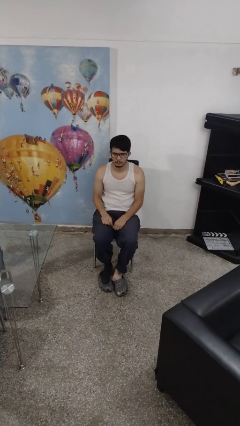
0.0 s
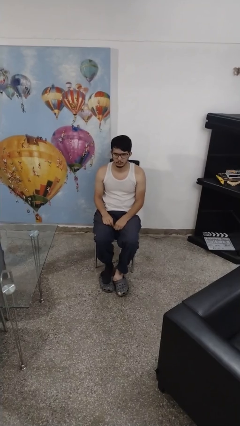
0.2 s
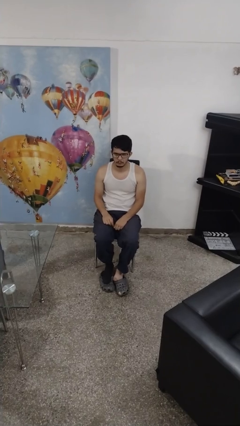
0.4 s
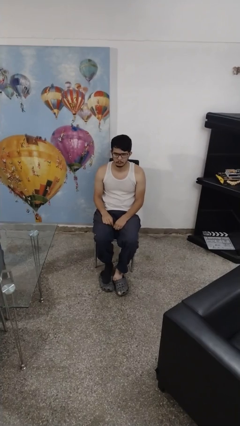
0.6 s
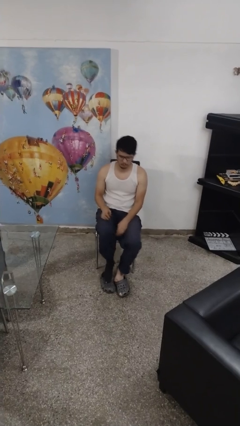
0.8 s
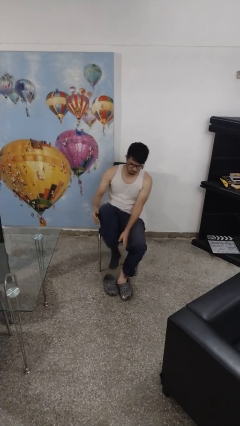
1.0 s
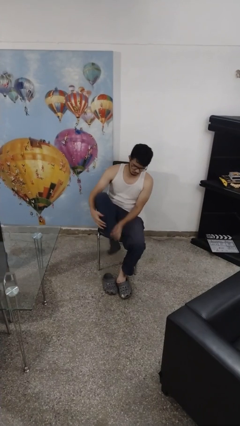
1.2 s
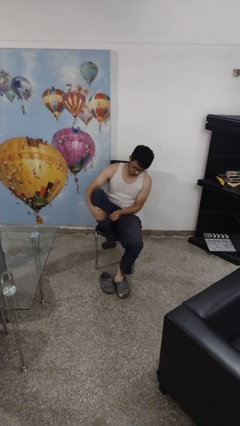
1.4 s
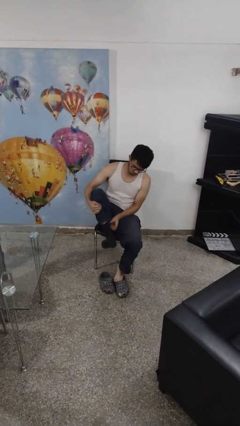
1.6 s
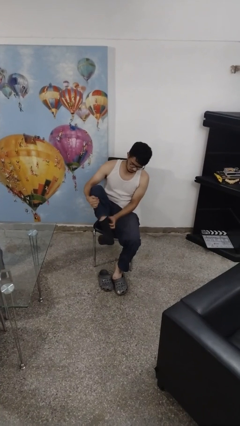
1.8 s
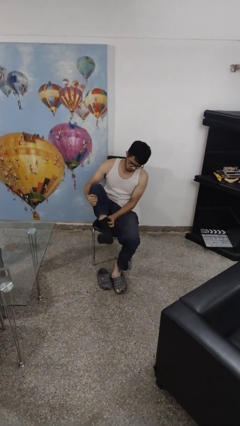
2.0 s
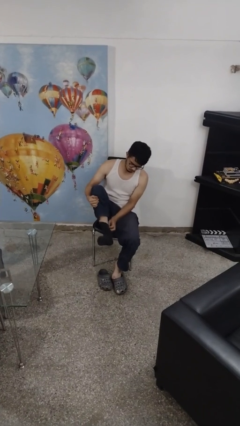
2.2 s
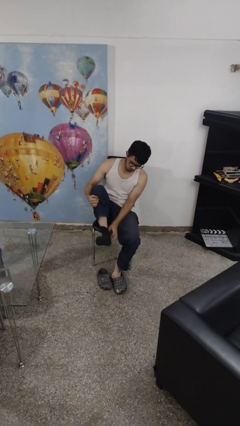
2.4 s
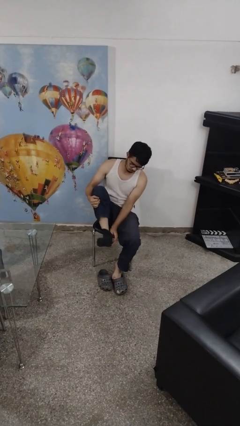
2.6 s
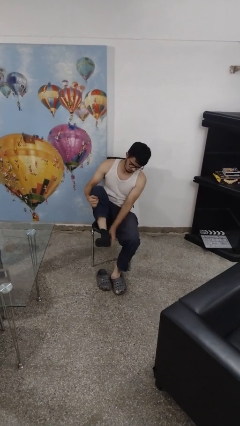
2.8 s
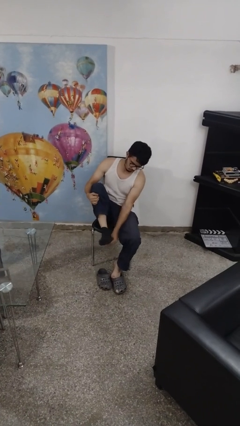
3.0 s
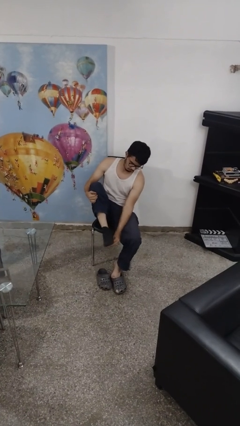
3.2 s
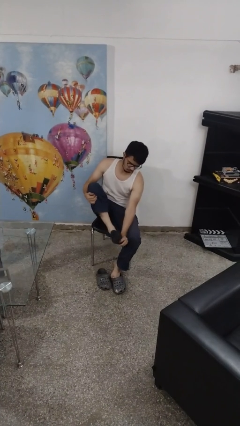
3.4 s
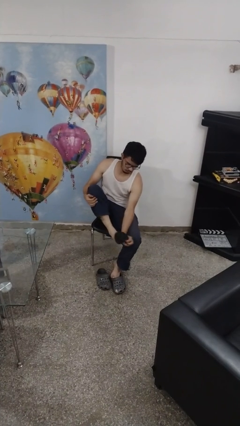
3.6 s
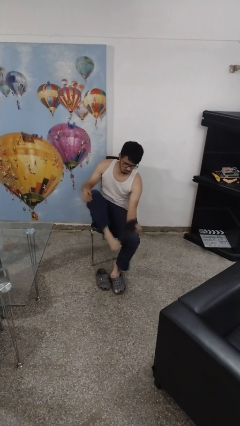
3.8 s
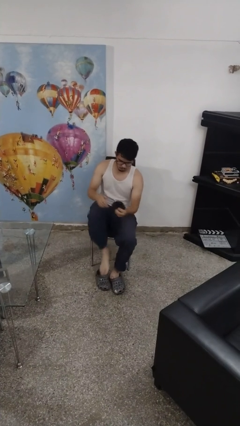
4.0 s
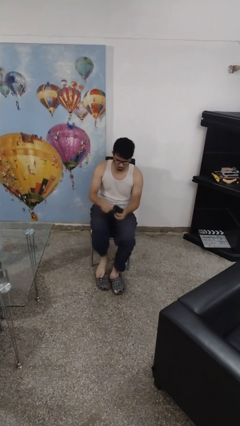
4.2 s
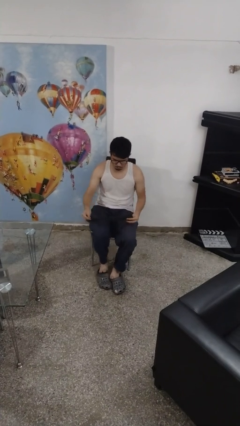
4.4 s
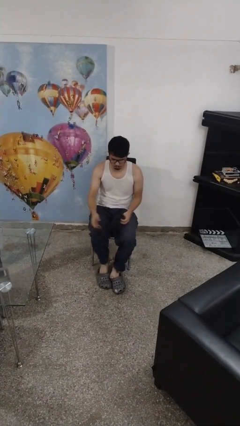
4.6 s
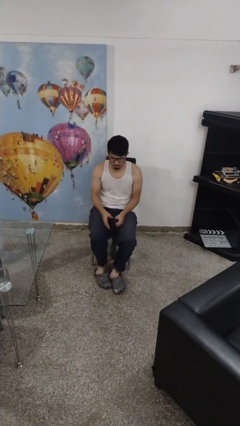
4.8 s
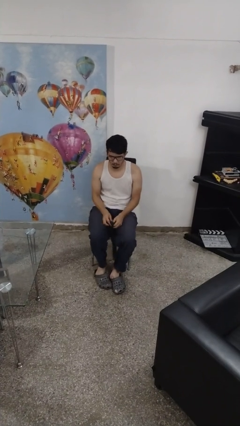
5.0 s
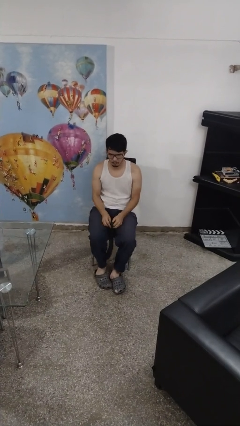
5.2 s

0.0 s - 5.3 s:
person takes off socks

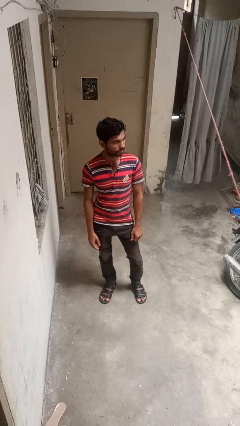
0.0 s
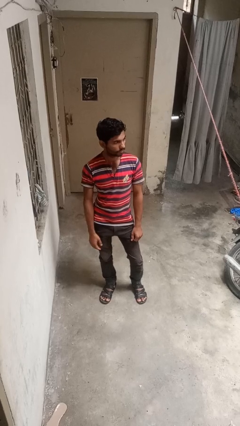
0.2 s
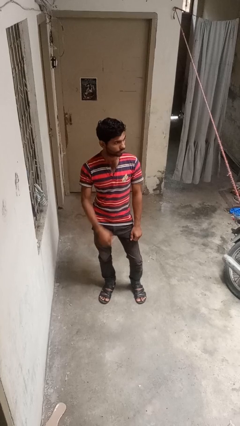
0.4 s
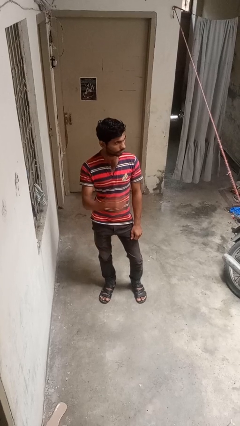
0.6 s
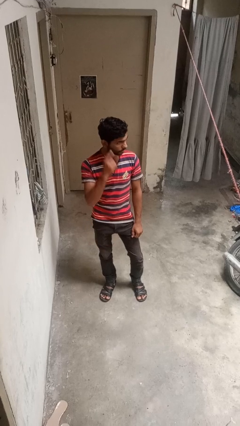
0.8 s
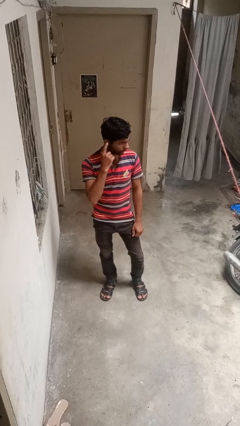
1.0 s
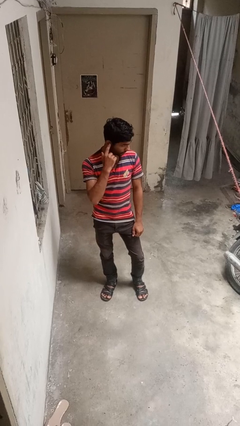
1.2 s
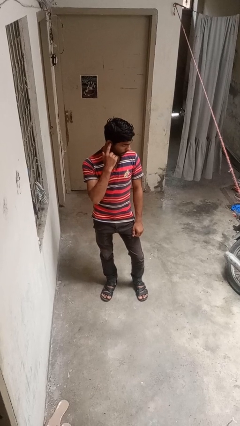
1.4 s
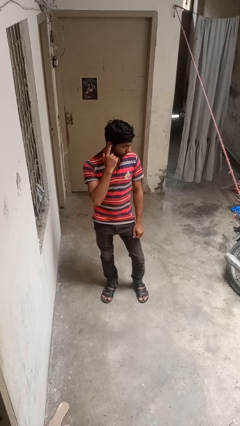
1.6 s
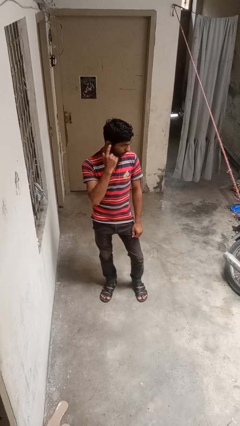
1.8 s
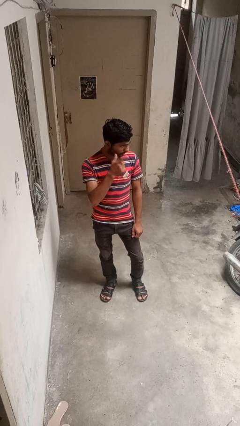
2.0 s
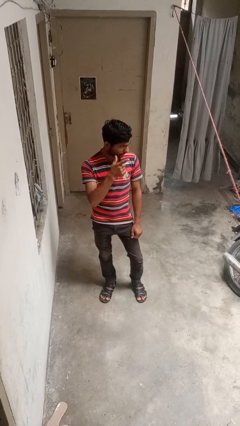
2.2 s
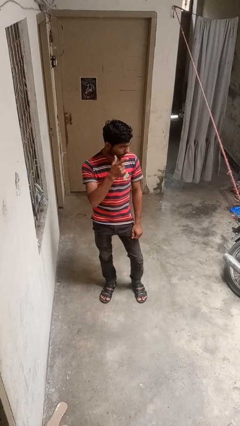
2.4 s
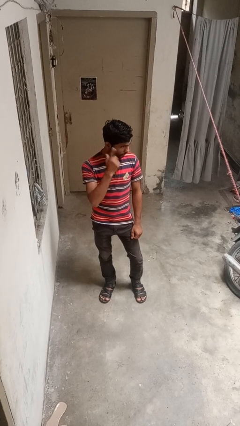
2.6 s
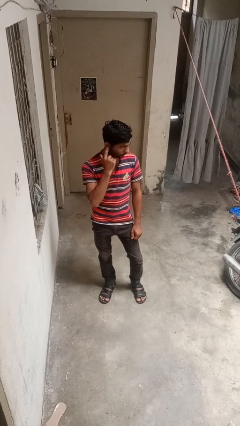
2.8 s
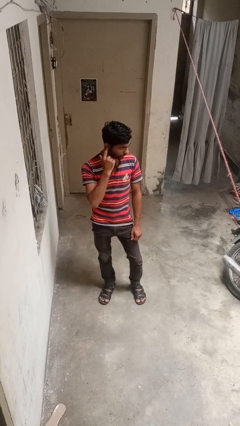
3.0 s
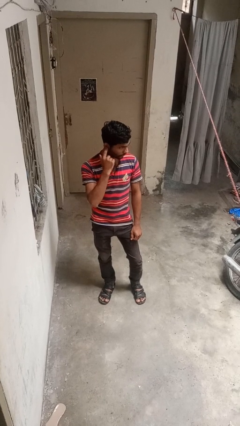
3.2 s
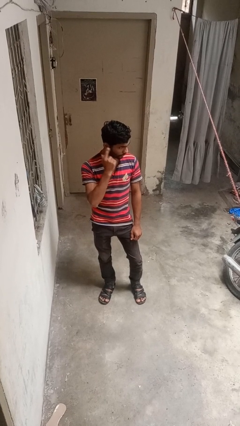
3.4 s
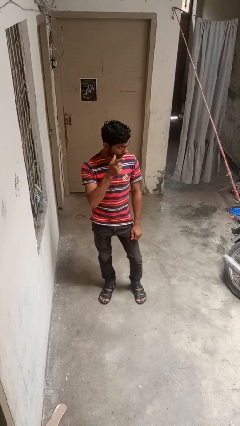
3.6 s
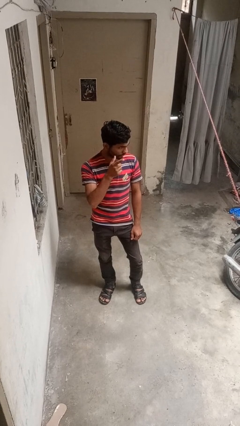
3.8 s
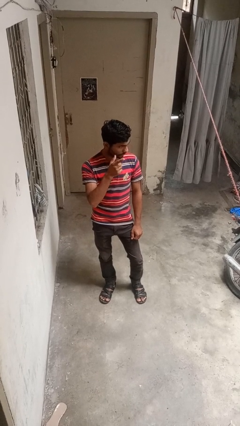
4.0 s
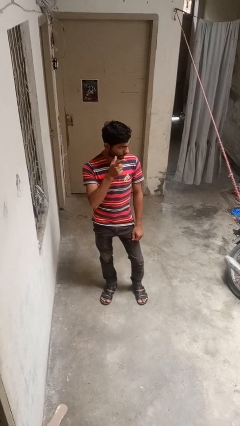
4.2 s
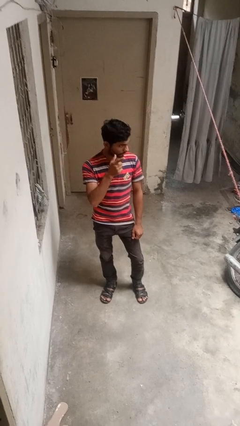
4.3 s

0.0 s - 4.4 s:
person gestures listen closely

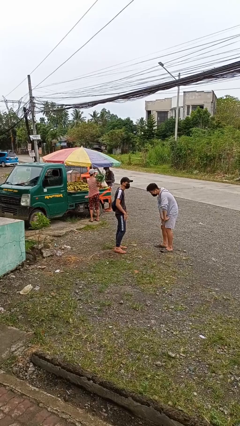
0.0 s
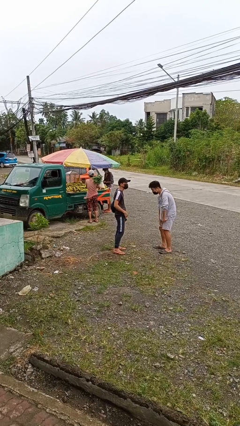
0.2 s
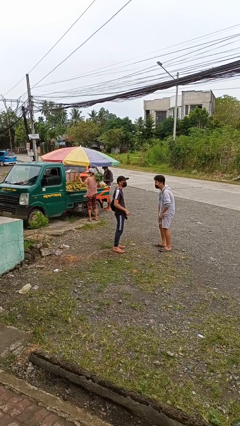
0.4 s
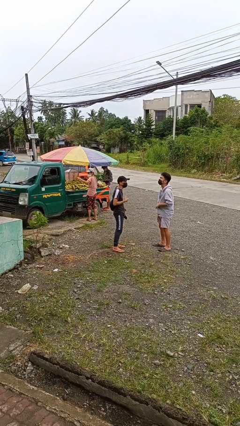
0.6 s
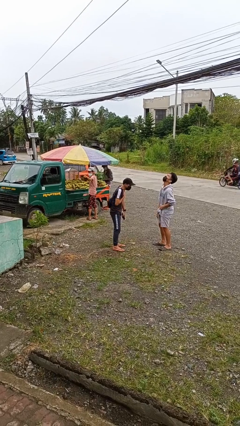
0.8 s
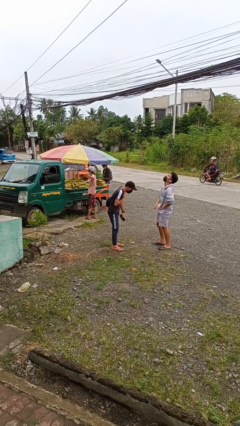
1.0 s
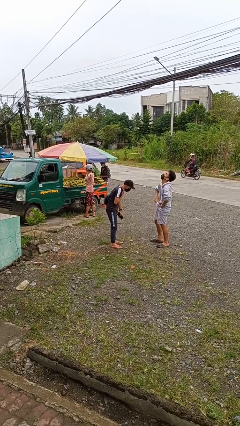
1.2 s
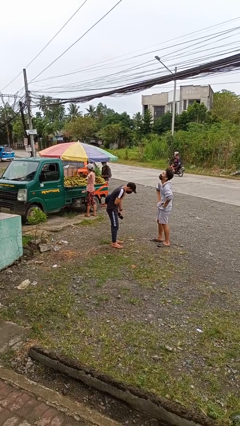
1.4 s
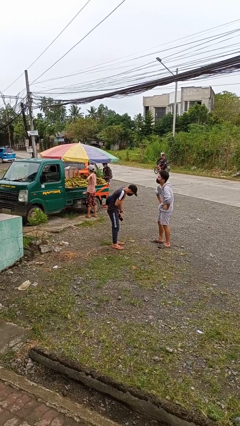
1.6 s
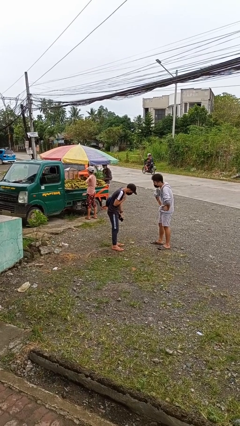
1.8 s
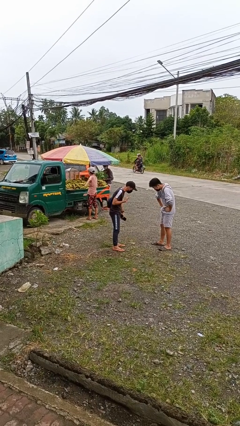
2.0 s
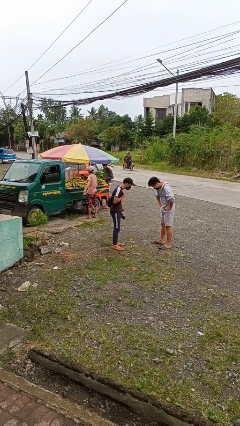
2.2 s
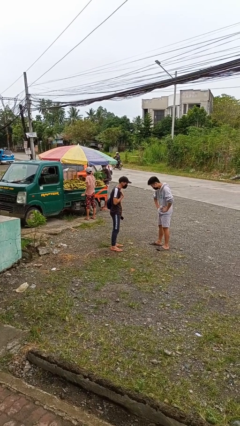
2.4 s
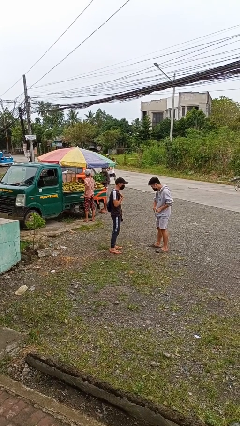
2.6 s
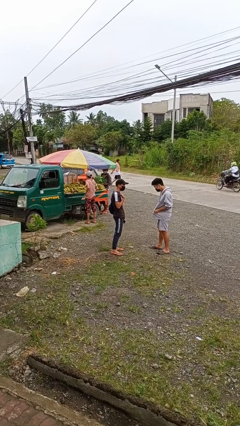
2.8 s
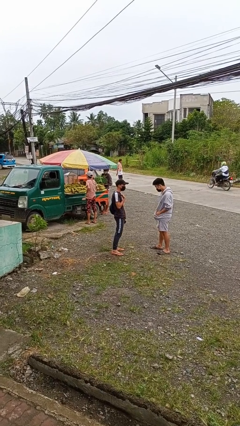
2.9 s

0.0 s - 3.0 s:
person laughs with person

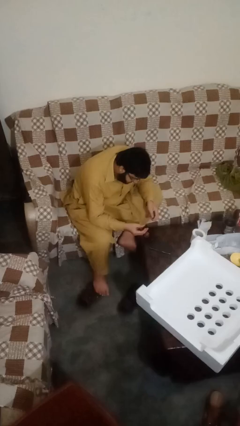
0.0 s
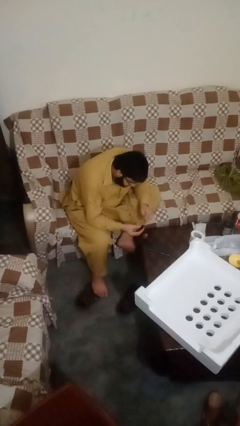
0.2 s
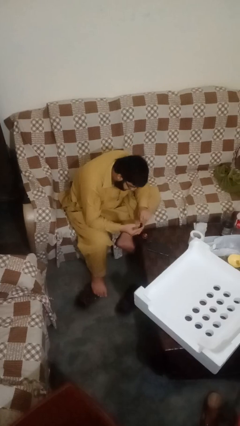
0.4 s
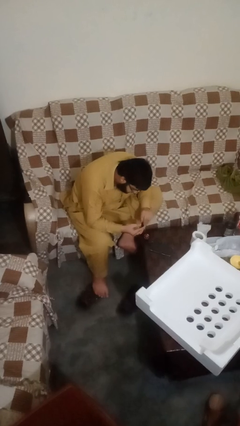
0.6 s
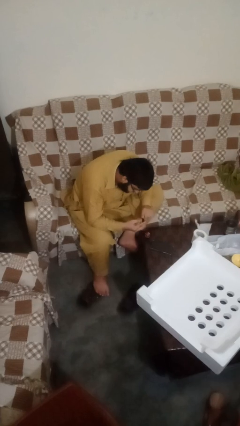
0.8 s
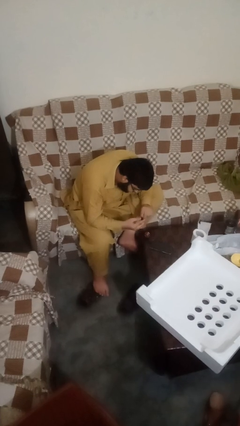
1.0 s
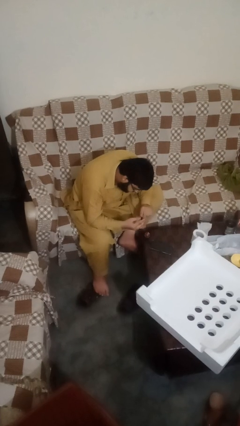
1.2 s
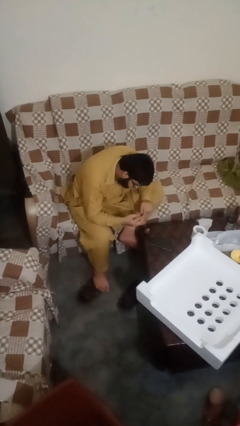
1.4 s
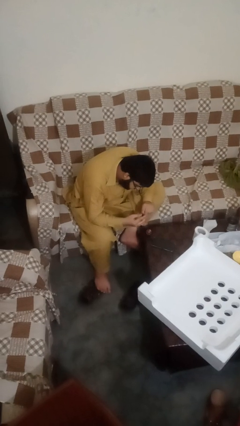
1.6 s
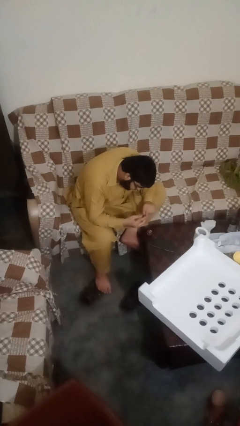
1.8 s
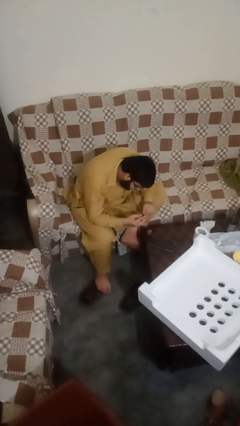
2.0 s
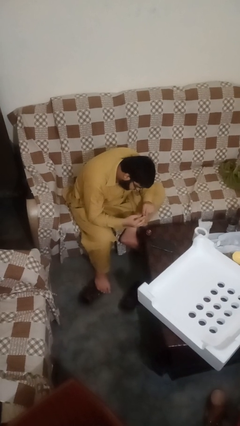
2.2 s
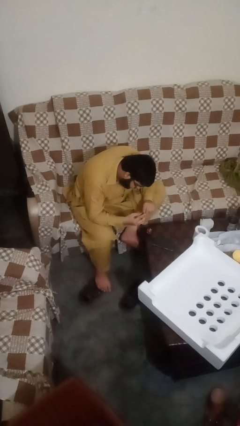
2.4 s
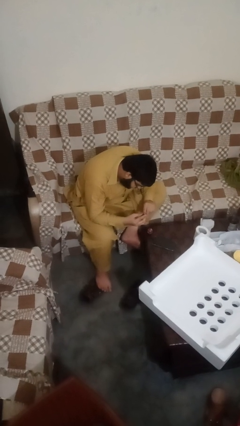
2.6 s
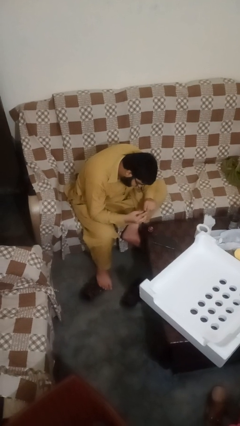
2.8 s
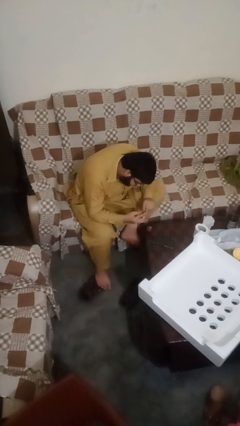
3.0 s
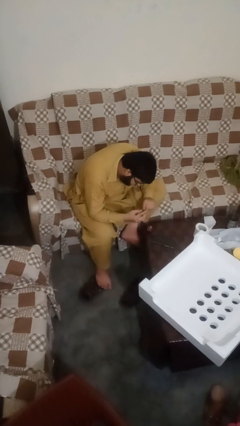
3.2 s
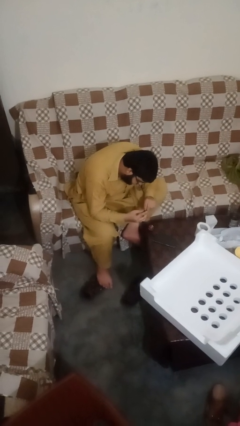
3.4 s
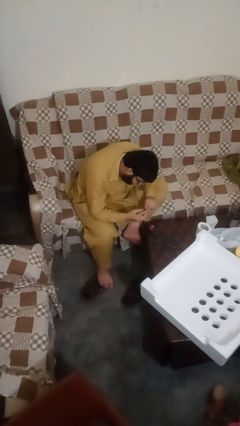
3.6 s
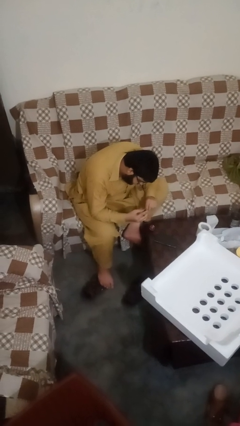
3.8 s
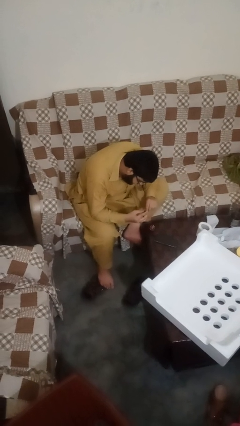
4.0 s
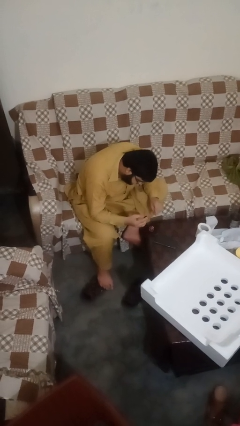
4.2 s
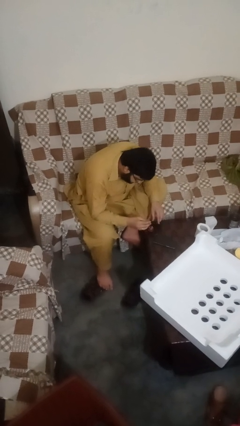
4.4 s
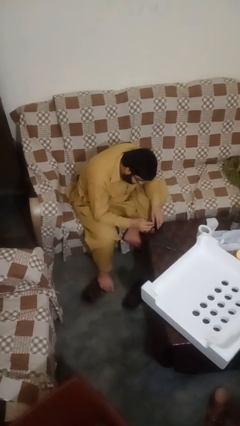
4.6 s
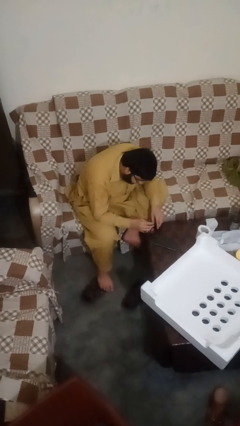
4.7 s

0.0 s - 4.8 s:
person paints fingernails

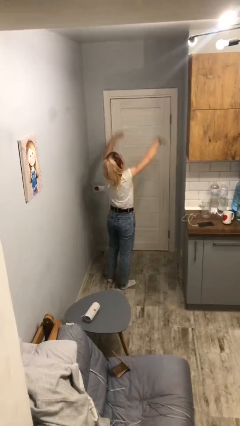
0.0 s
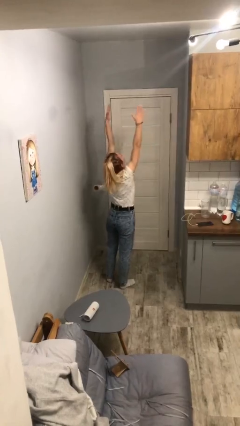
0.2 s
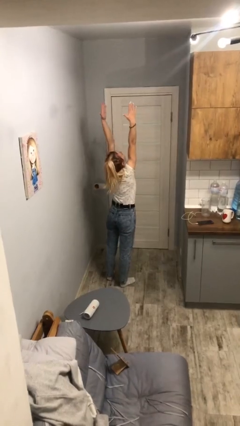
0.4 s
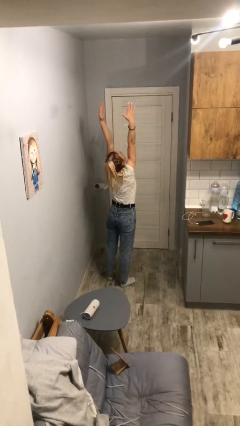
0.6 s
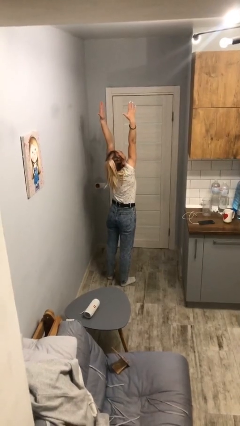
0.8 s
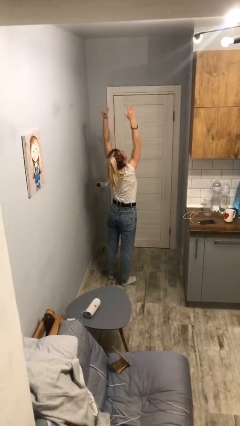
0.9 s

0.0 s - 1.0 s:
person stretches arms over head
